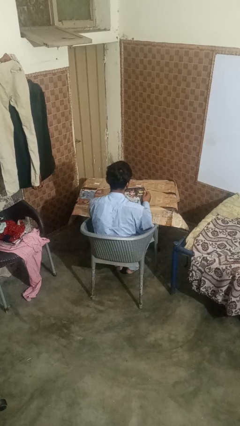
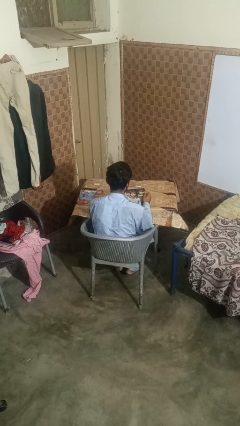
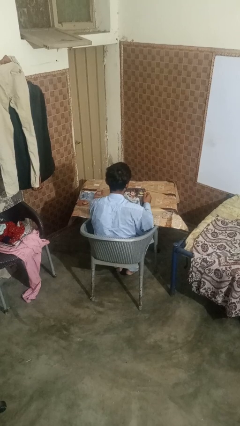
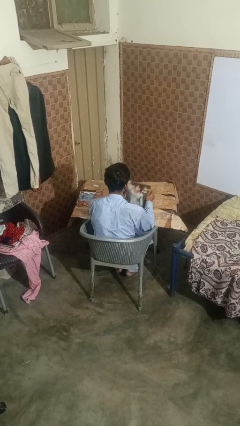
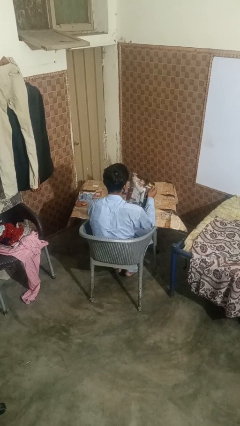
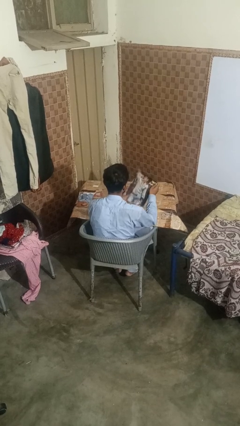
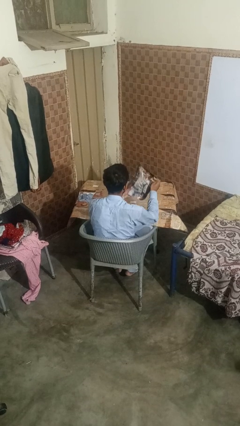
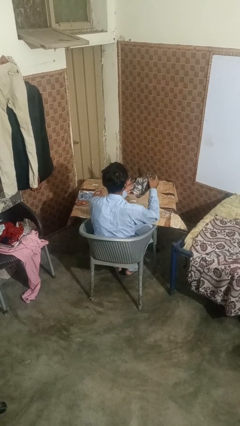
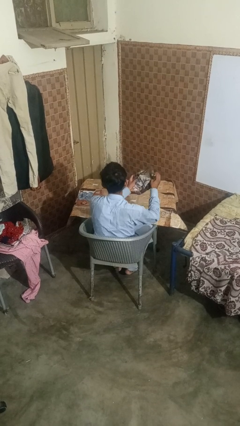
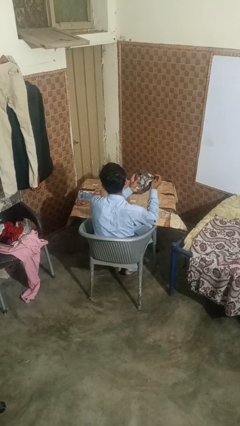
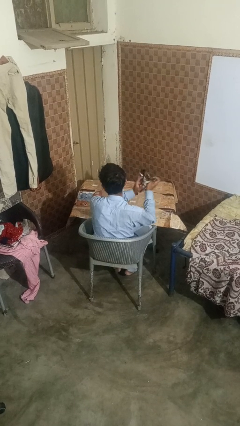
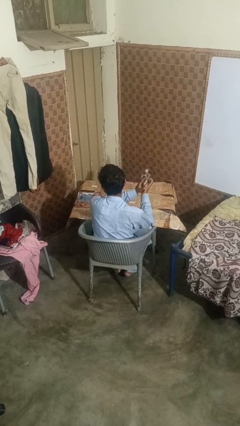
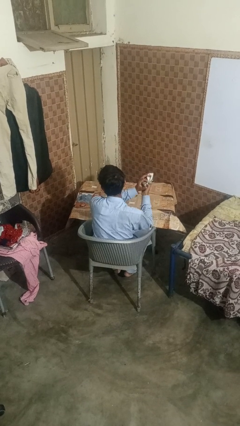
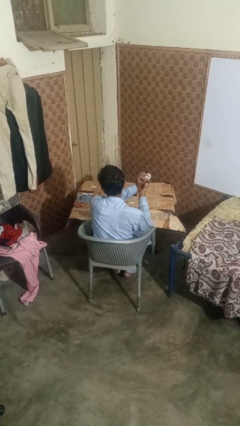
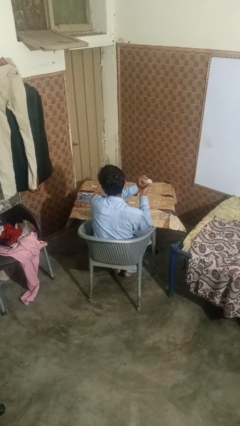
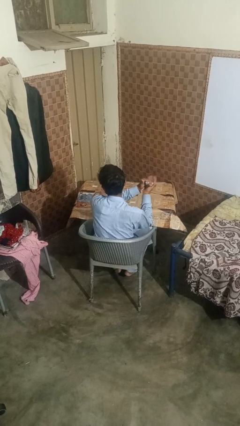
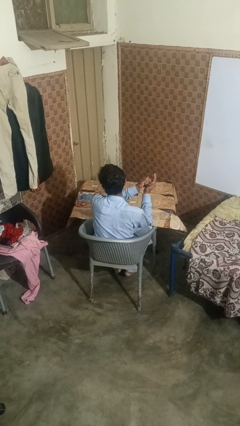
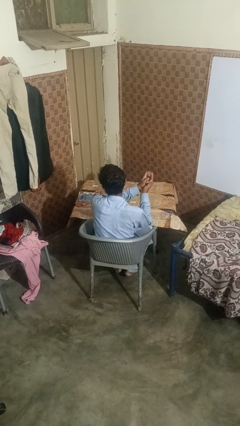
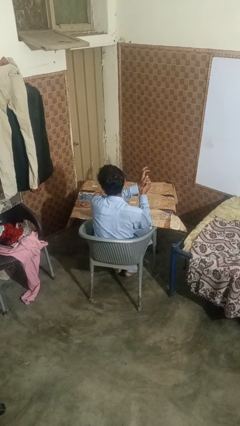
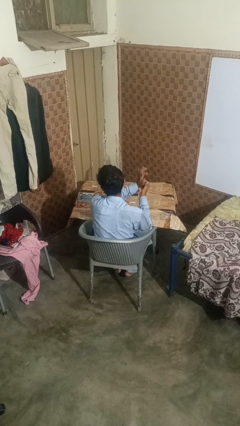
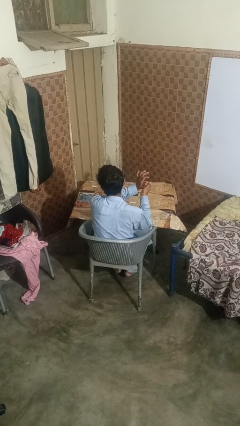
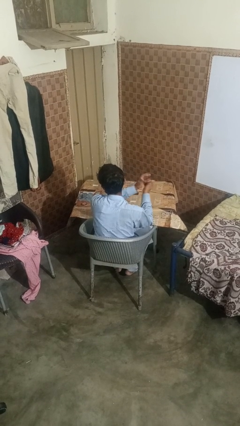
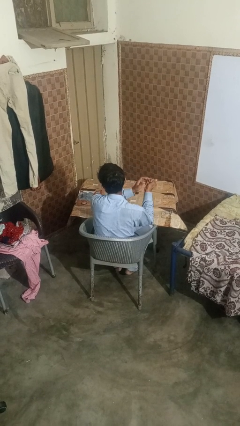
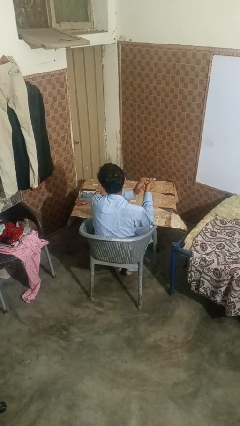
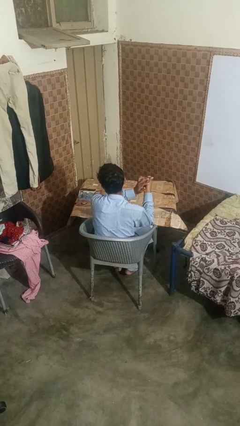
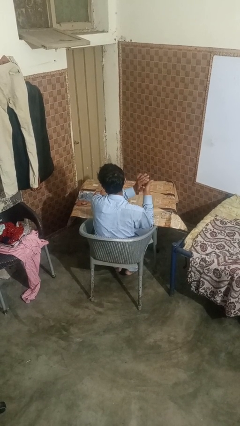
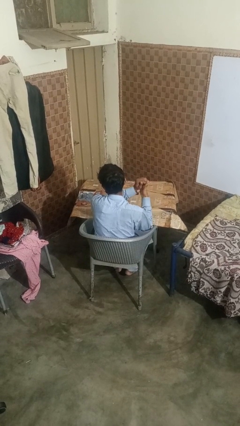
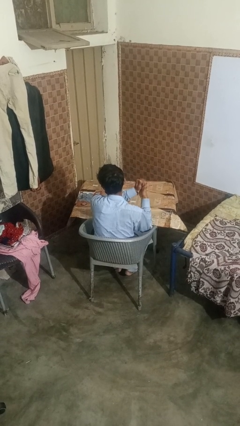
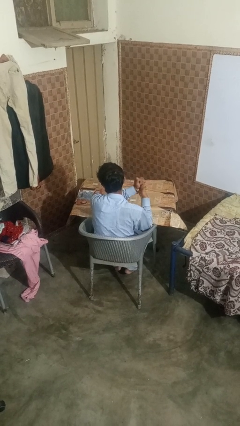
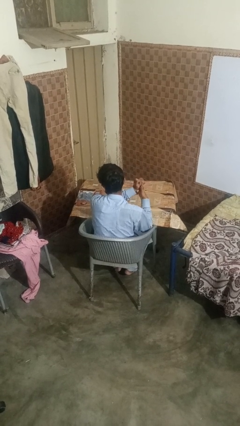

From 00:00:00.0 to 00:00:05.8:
person crumples paper

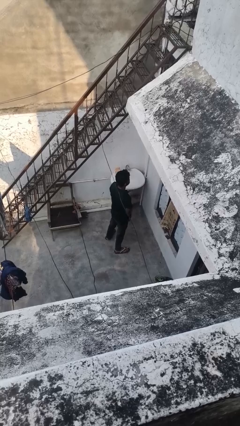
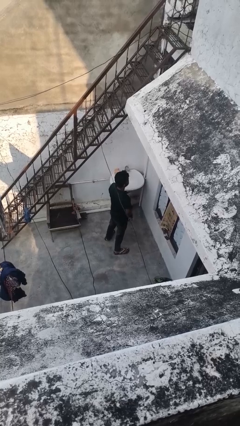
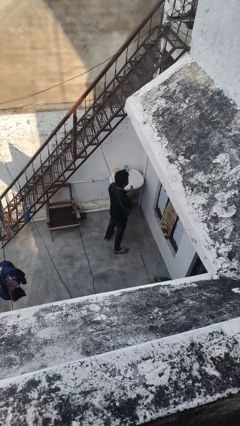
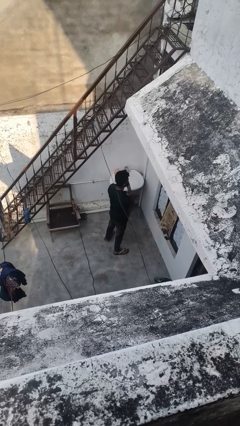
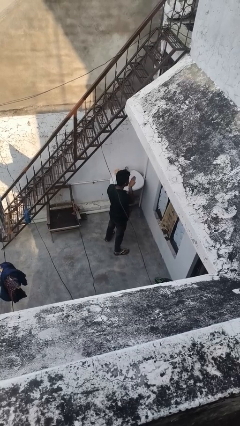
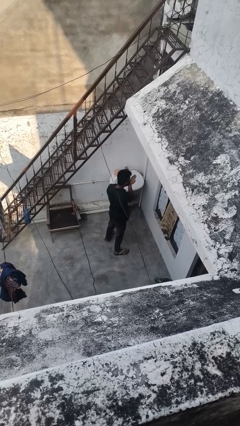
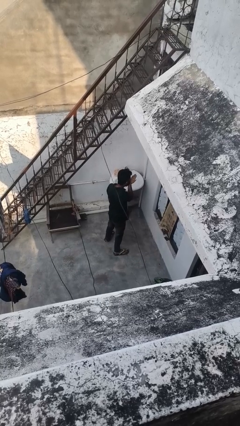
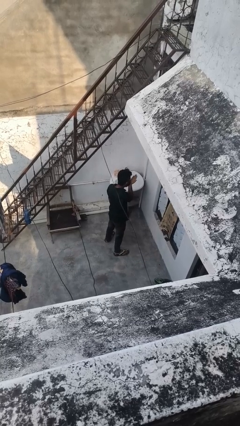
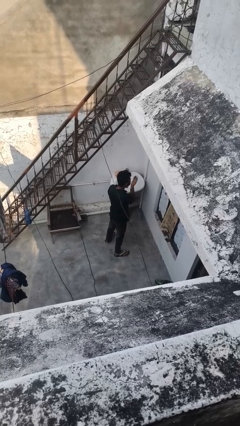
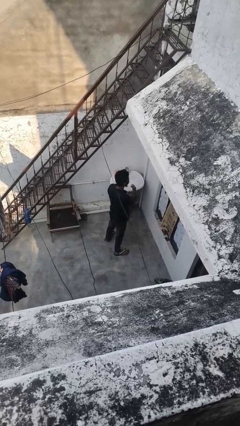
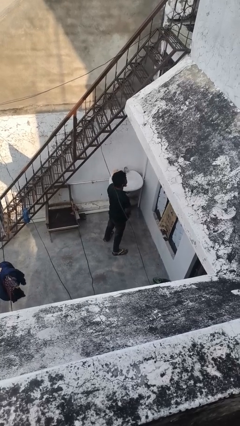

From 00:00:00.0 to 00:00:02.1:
person gestures blow kiss

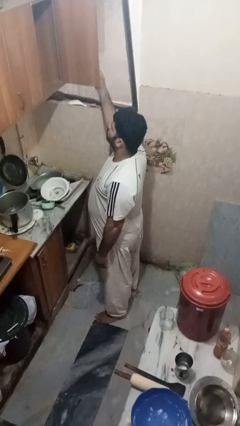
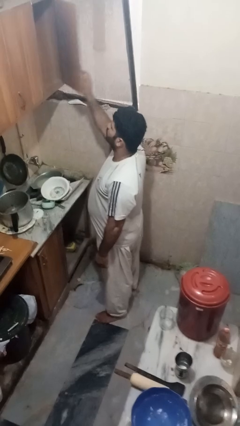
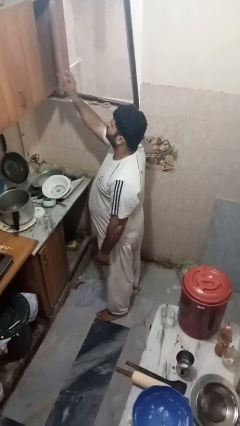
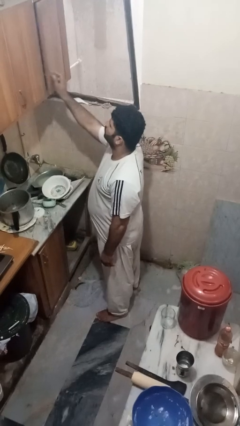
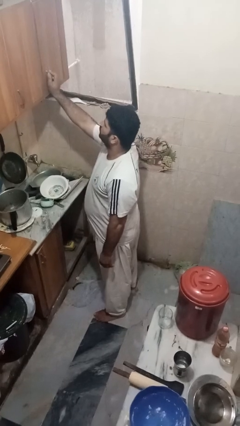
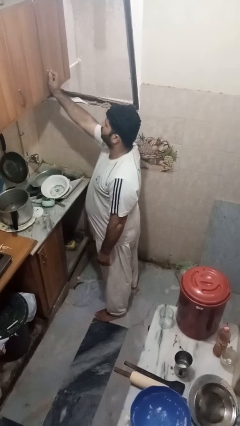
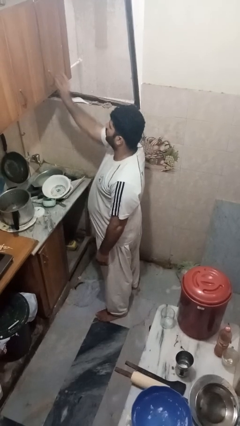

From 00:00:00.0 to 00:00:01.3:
person closes cabinet

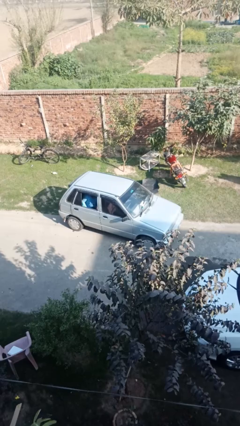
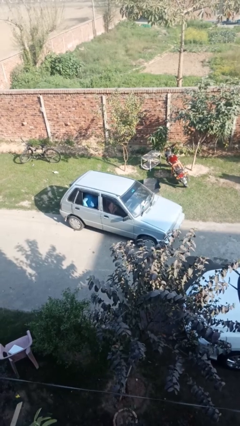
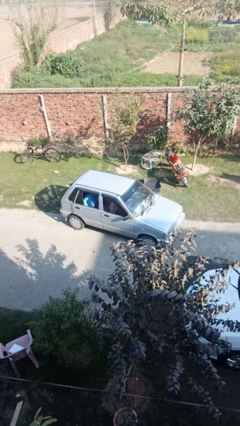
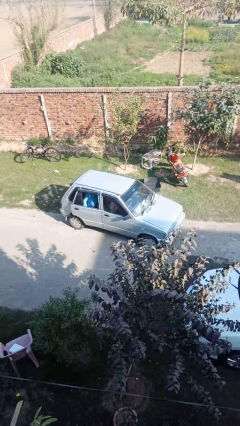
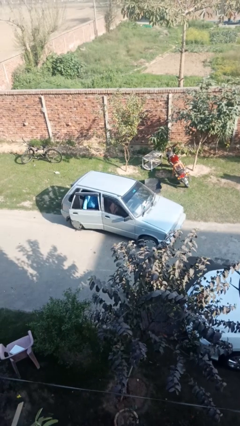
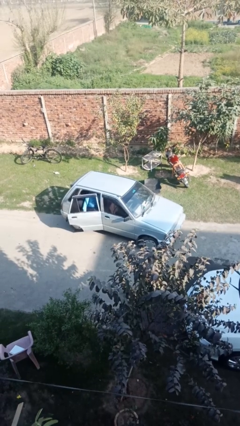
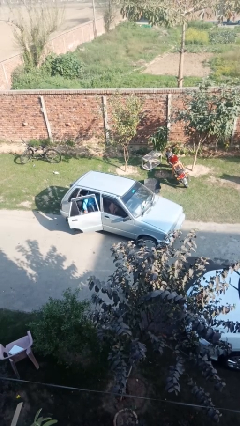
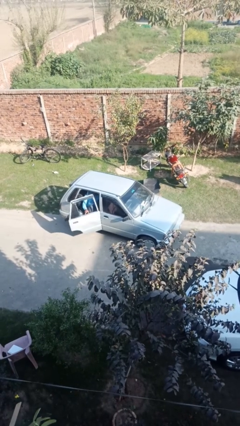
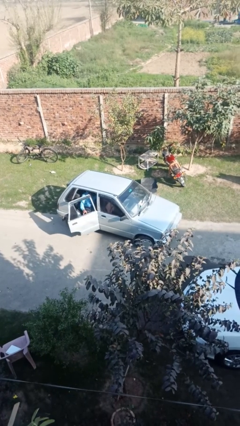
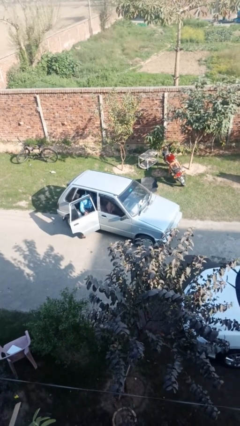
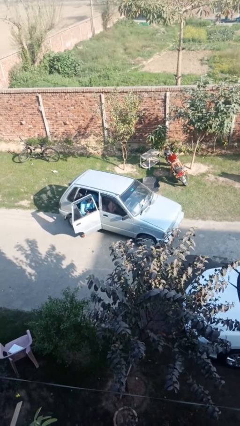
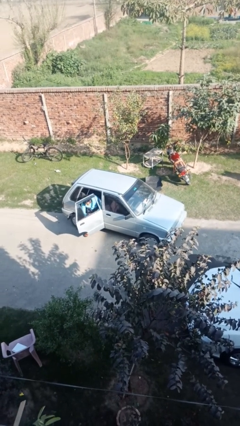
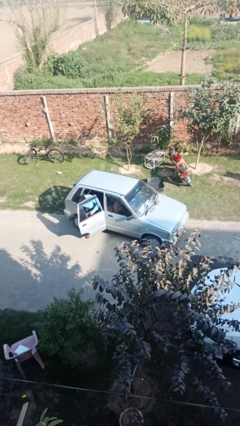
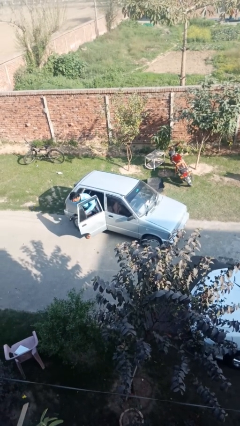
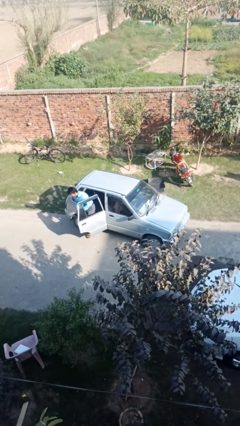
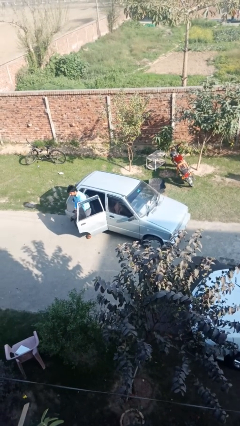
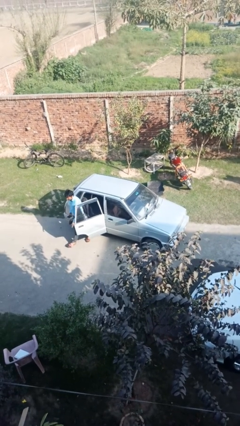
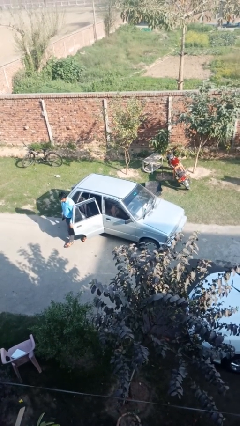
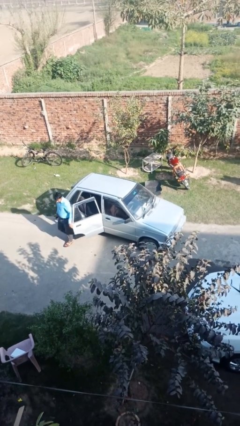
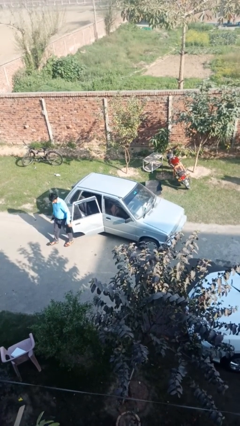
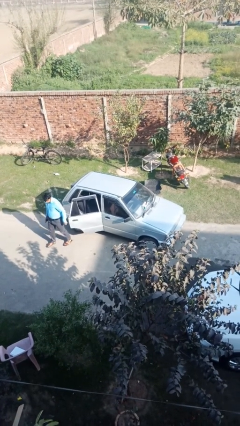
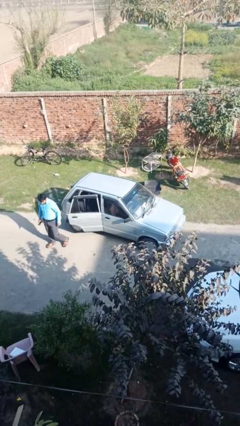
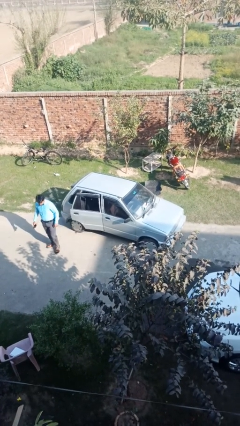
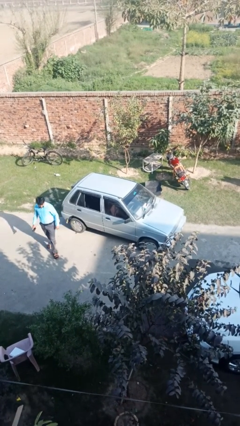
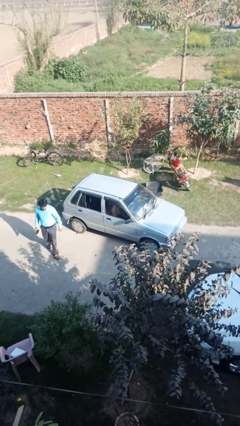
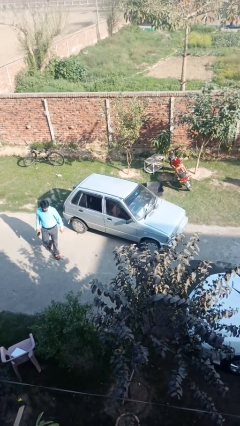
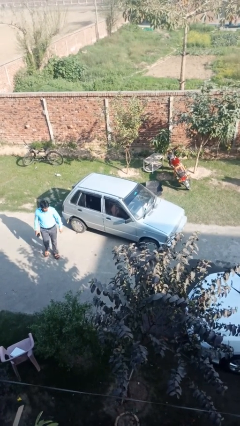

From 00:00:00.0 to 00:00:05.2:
car drops off person

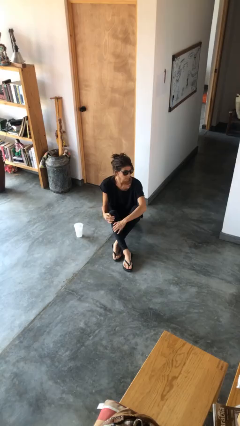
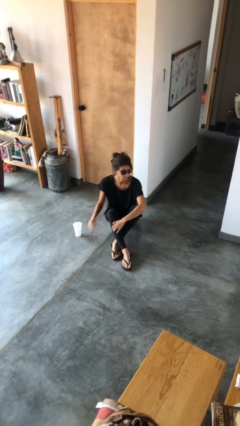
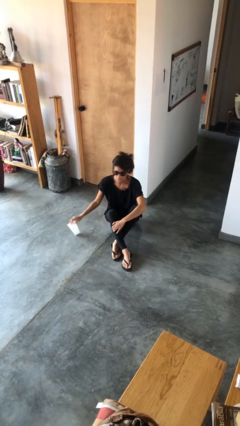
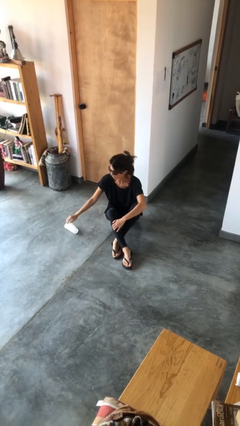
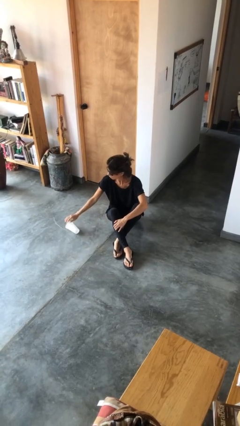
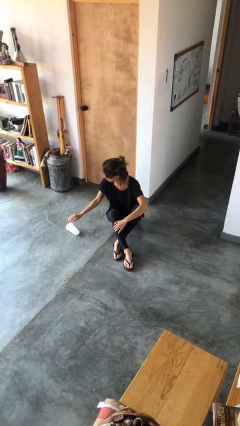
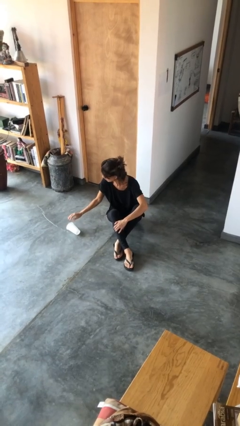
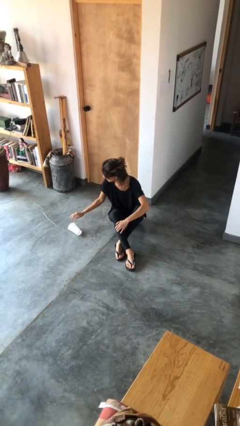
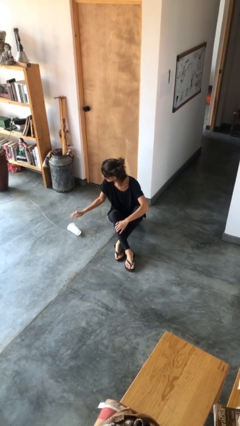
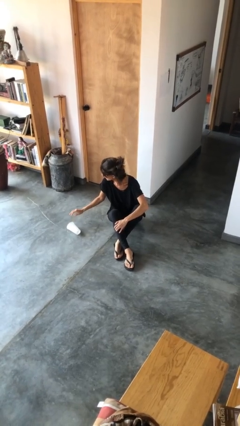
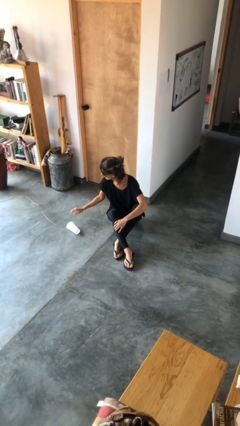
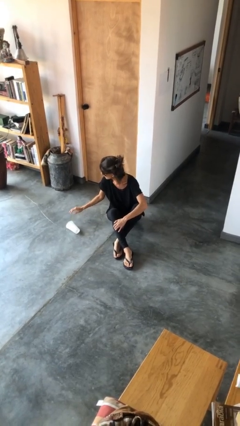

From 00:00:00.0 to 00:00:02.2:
person spills on floor

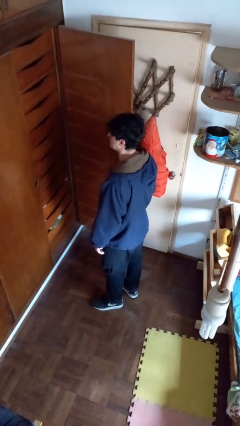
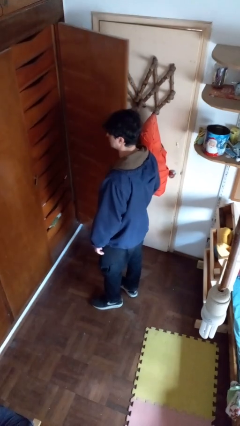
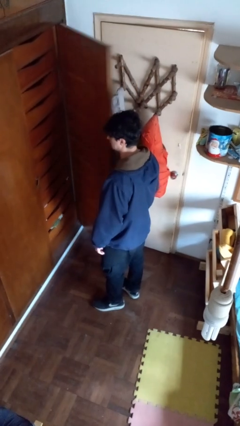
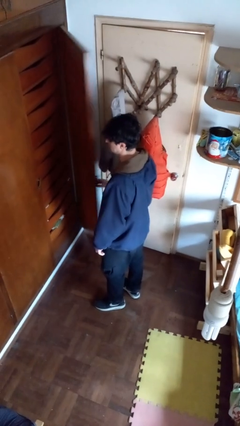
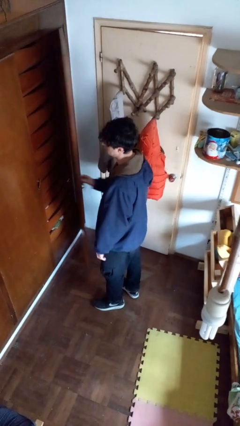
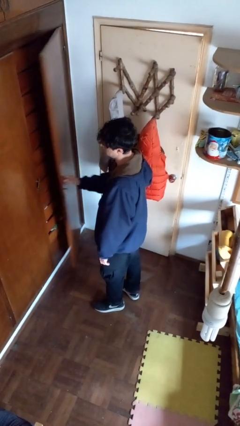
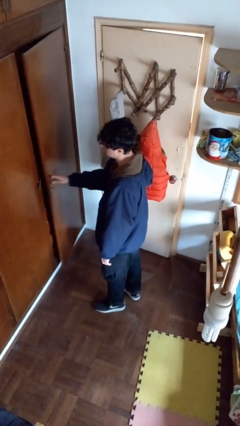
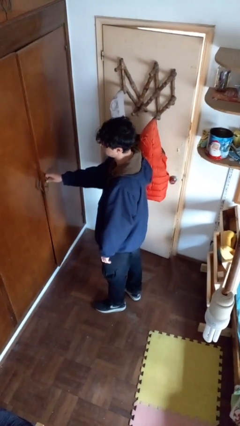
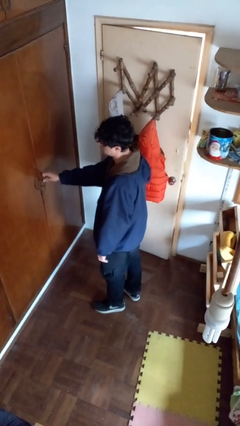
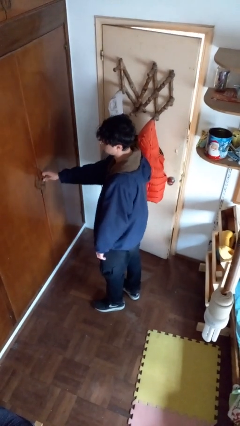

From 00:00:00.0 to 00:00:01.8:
person closes closet door
